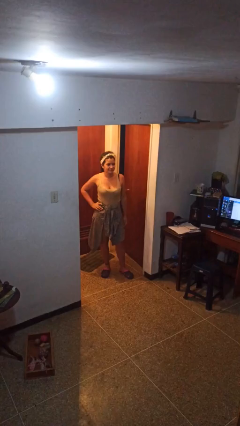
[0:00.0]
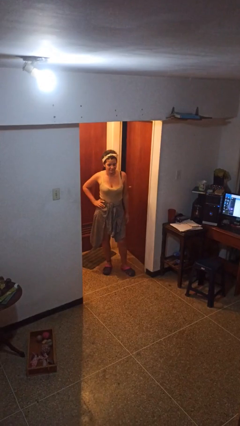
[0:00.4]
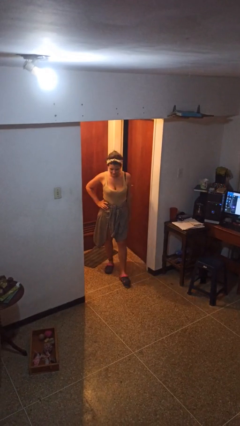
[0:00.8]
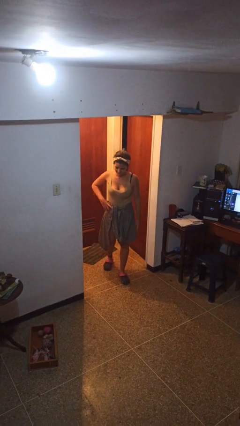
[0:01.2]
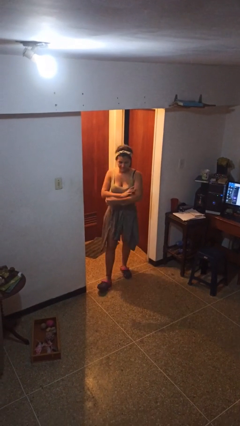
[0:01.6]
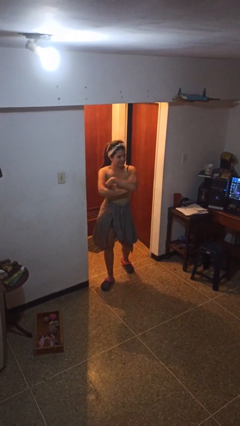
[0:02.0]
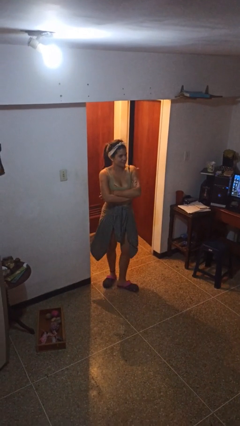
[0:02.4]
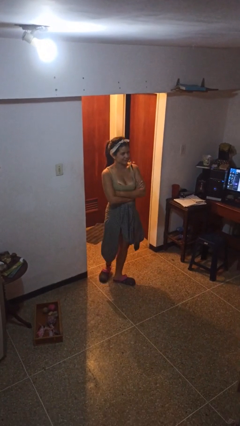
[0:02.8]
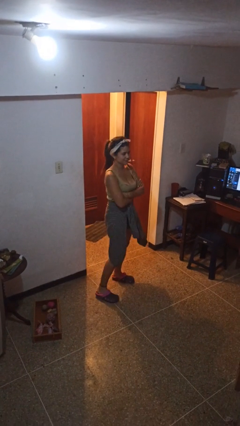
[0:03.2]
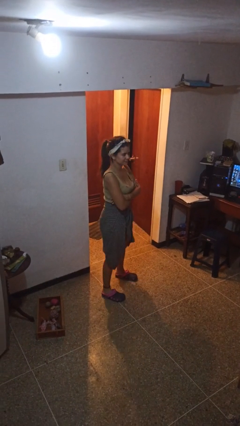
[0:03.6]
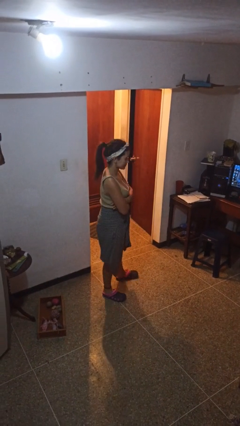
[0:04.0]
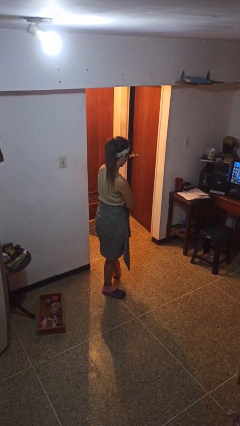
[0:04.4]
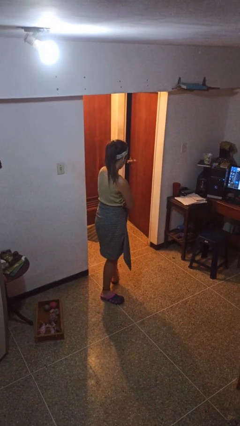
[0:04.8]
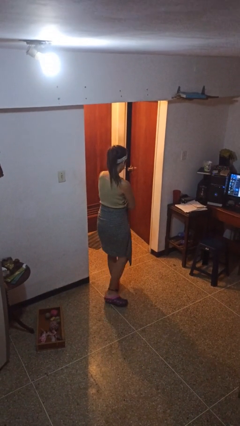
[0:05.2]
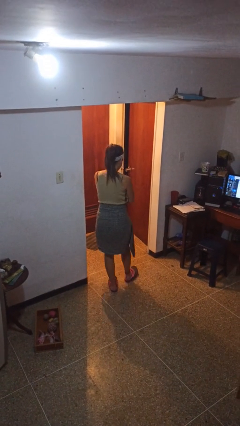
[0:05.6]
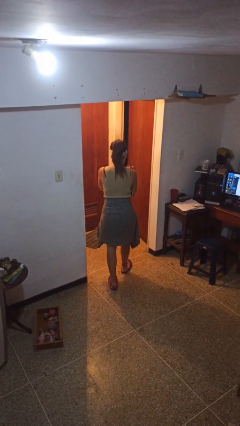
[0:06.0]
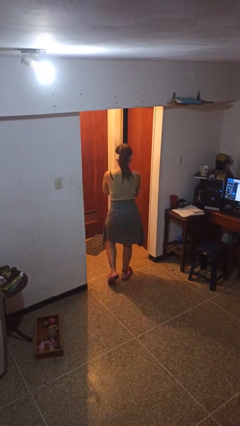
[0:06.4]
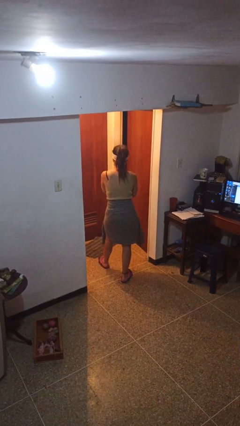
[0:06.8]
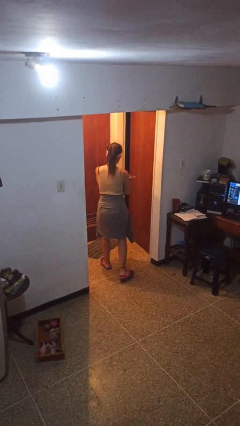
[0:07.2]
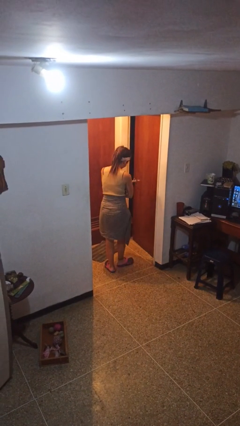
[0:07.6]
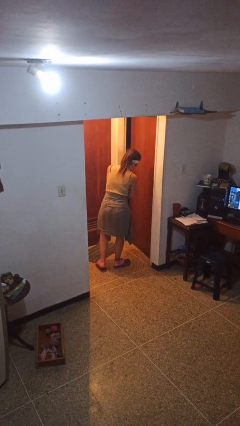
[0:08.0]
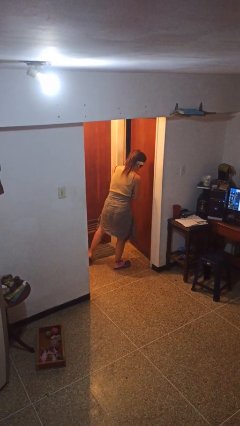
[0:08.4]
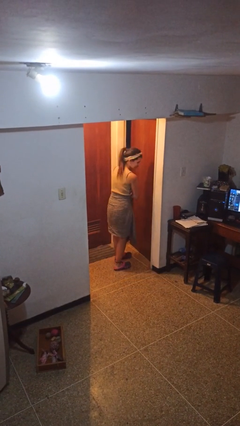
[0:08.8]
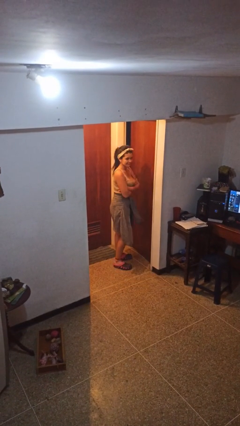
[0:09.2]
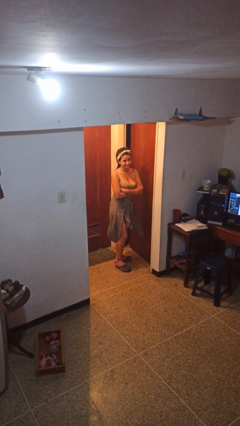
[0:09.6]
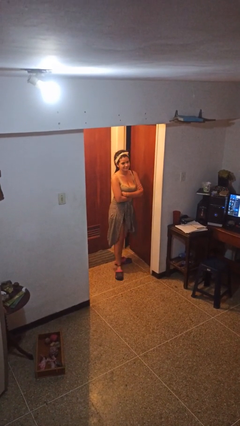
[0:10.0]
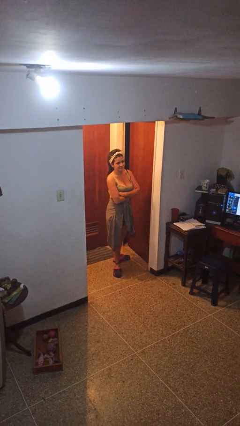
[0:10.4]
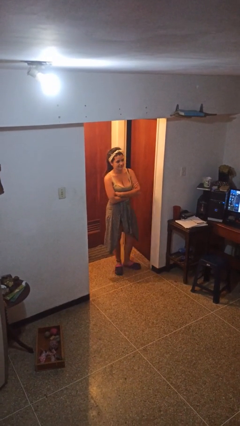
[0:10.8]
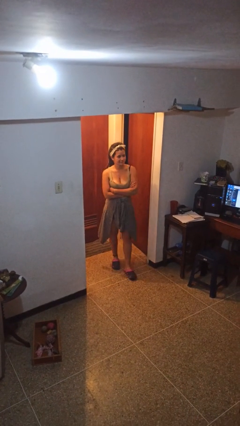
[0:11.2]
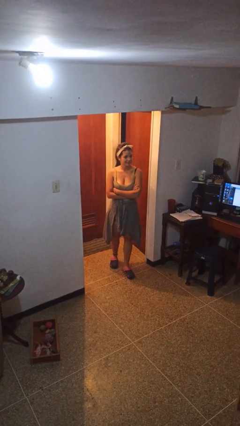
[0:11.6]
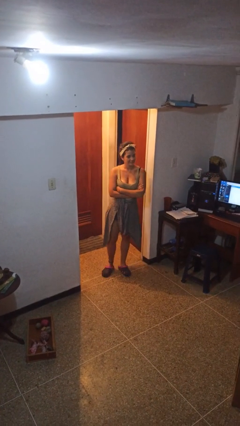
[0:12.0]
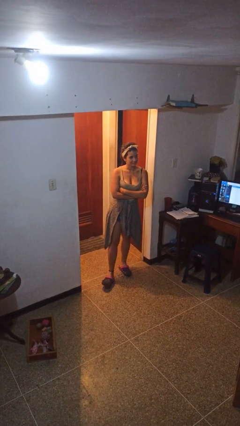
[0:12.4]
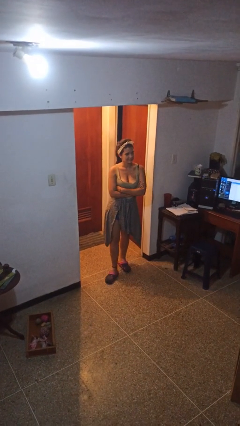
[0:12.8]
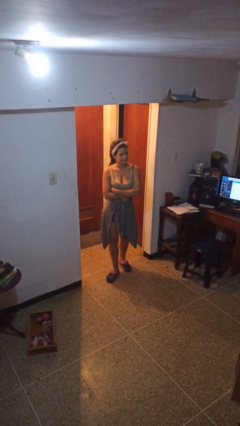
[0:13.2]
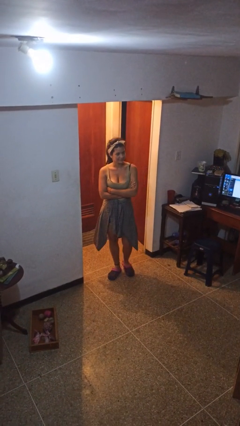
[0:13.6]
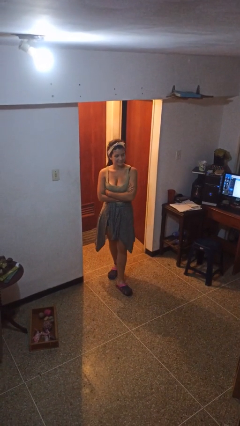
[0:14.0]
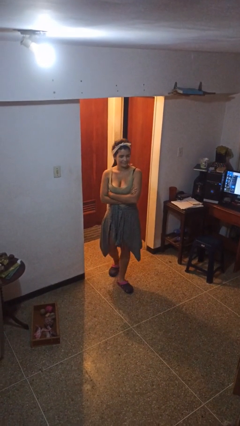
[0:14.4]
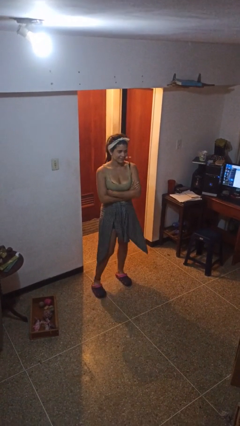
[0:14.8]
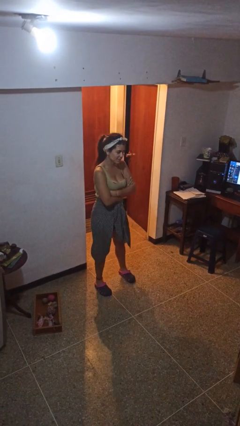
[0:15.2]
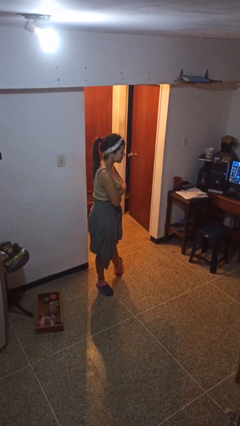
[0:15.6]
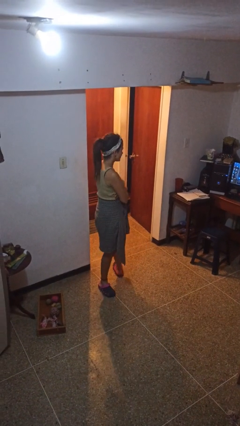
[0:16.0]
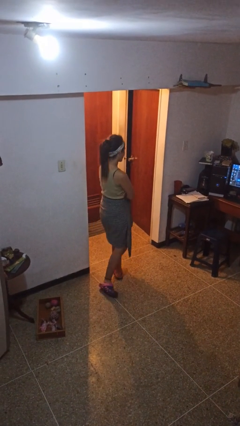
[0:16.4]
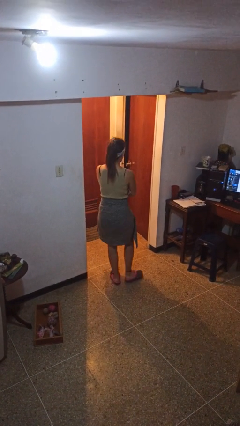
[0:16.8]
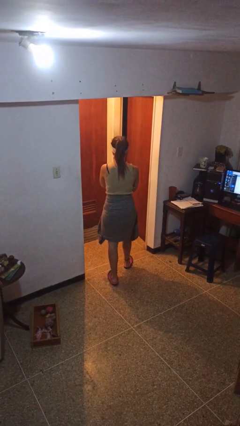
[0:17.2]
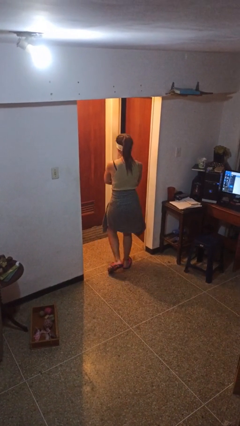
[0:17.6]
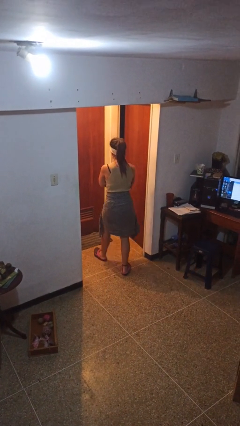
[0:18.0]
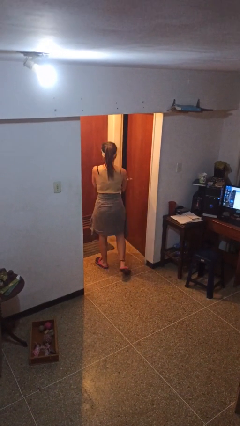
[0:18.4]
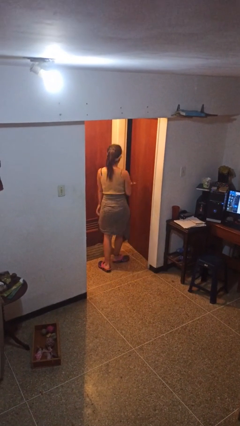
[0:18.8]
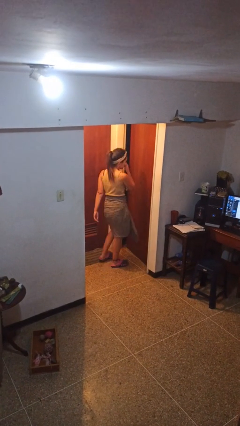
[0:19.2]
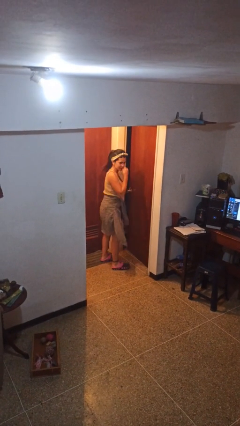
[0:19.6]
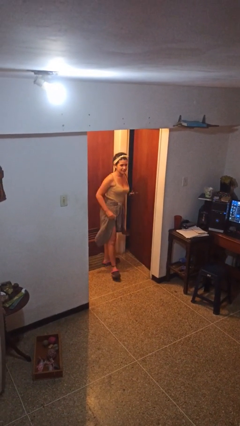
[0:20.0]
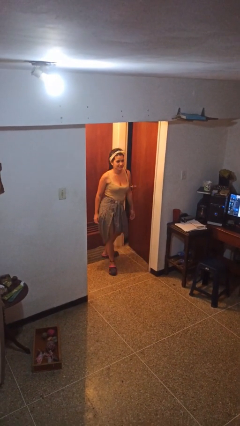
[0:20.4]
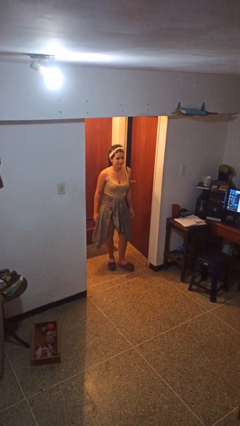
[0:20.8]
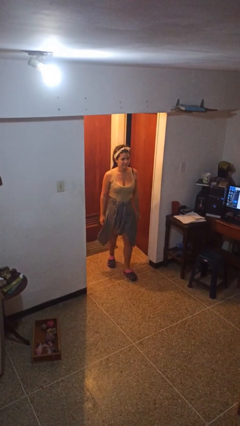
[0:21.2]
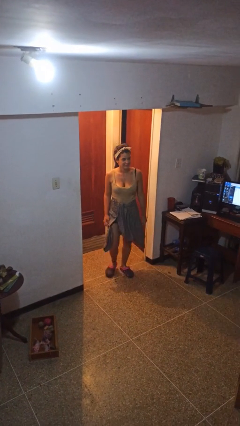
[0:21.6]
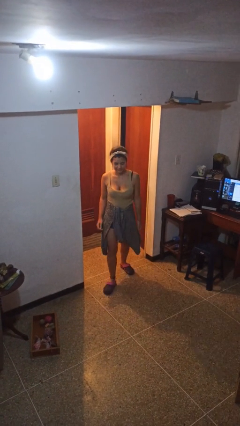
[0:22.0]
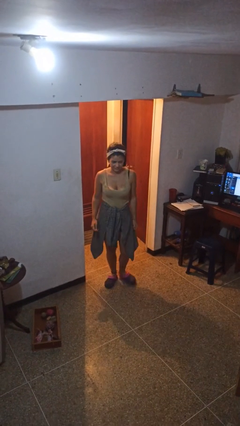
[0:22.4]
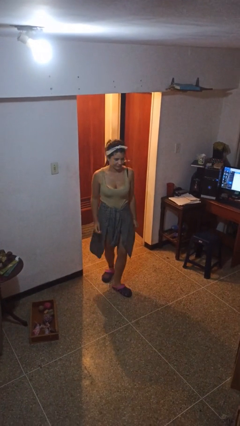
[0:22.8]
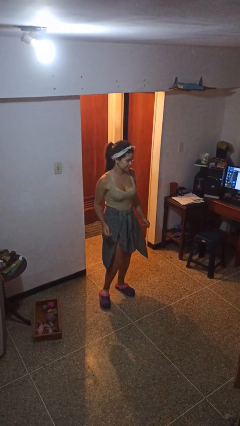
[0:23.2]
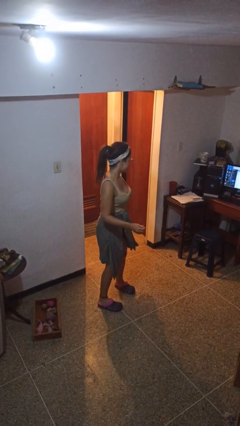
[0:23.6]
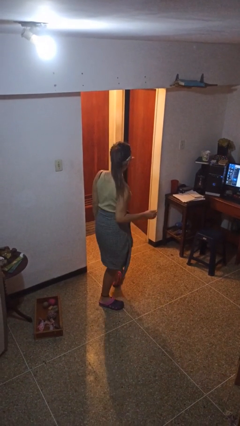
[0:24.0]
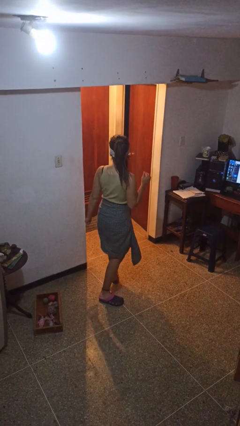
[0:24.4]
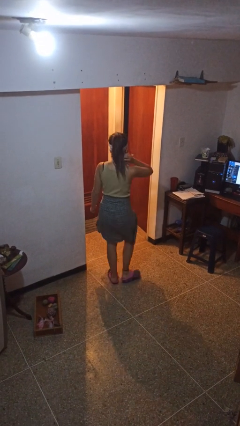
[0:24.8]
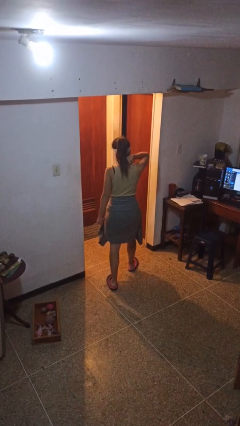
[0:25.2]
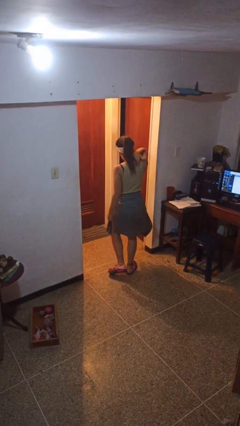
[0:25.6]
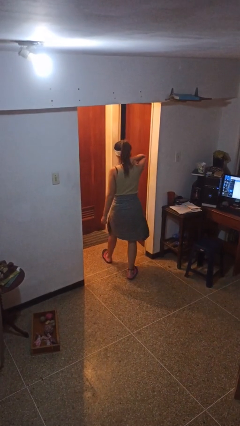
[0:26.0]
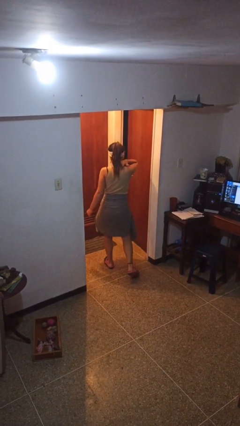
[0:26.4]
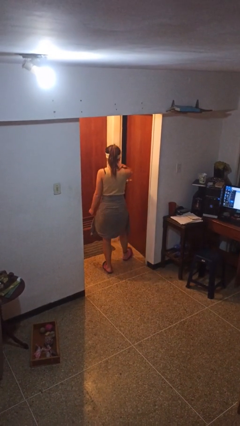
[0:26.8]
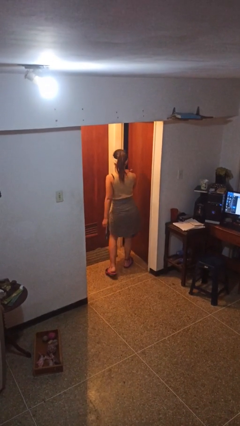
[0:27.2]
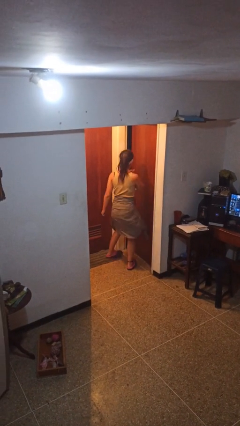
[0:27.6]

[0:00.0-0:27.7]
person walks

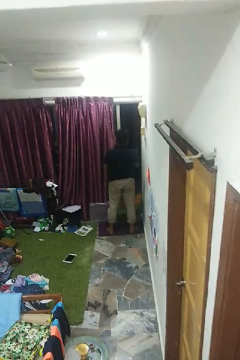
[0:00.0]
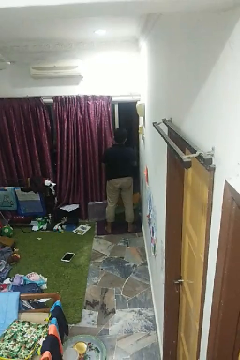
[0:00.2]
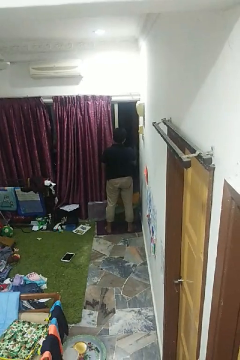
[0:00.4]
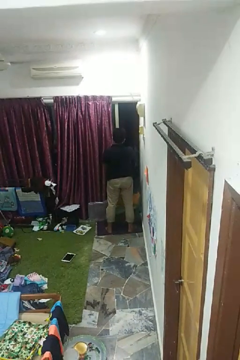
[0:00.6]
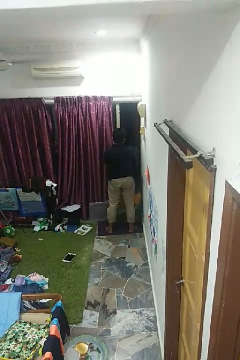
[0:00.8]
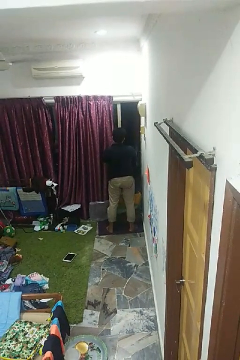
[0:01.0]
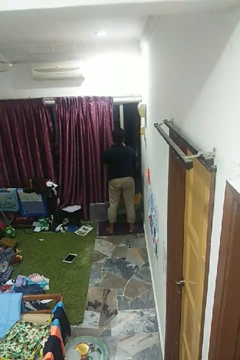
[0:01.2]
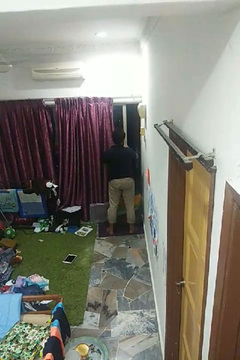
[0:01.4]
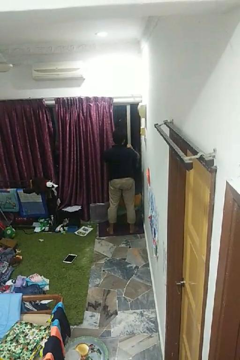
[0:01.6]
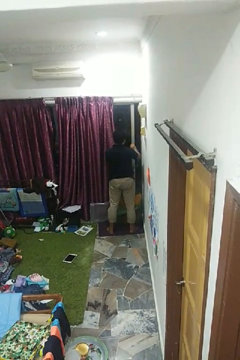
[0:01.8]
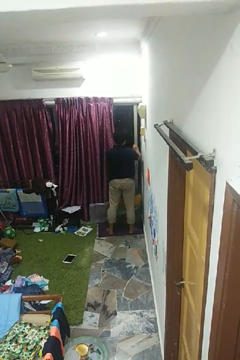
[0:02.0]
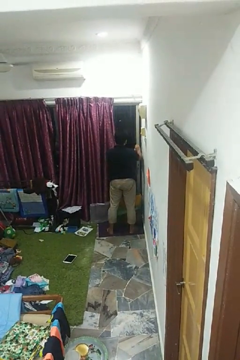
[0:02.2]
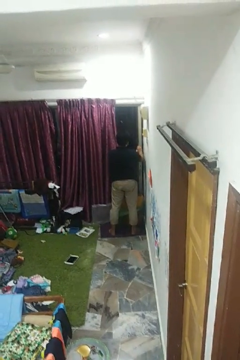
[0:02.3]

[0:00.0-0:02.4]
person closes home window

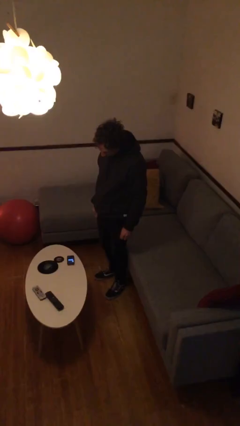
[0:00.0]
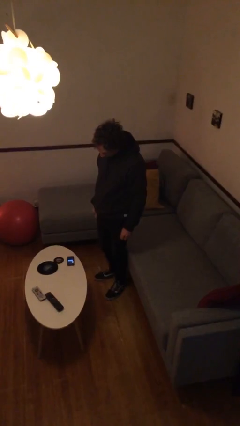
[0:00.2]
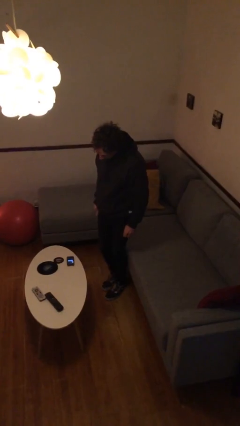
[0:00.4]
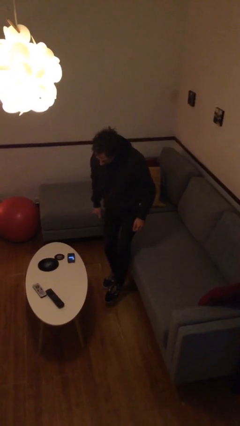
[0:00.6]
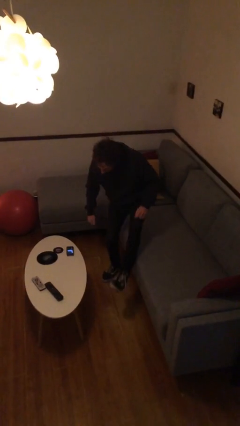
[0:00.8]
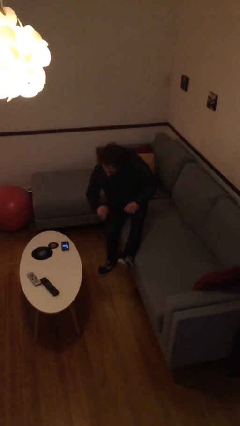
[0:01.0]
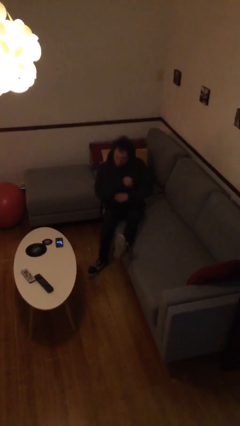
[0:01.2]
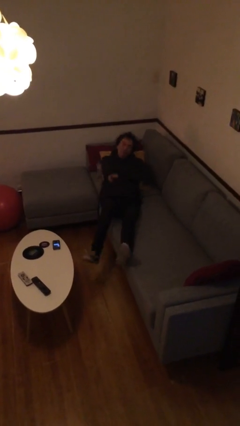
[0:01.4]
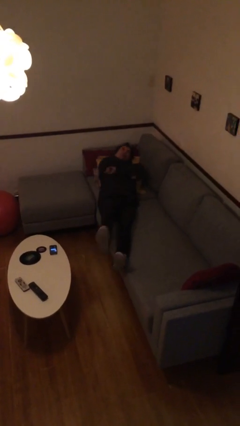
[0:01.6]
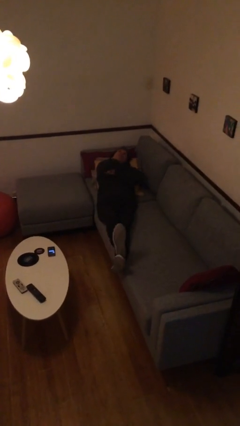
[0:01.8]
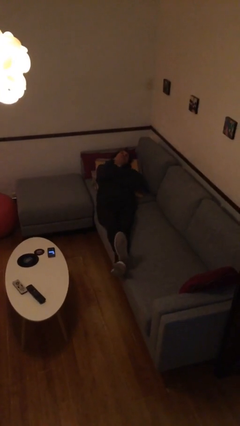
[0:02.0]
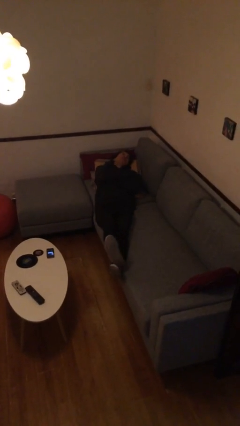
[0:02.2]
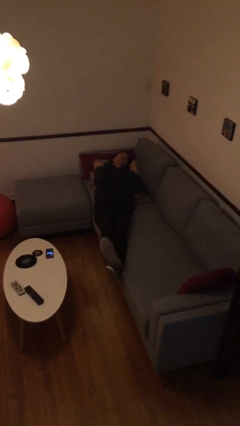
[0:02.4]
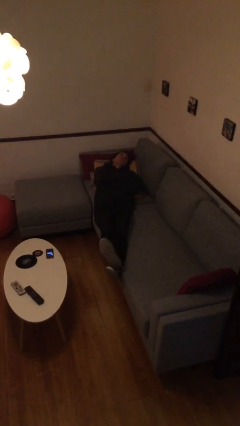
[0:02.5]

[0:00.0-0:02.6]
person lies down on couch
